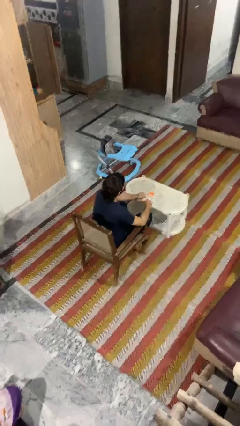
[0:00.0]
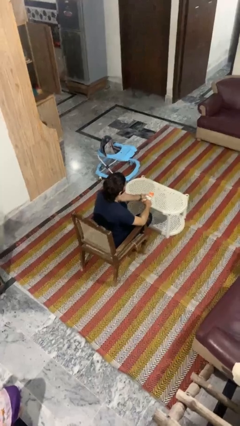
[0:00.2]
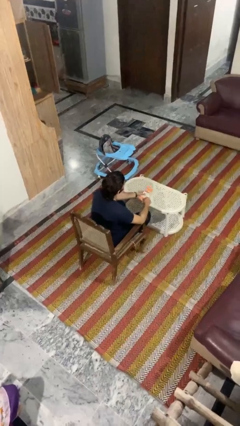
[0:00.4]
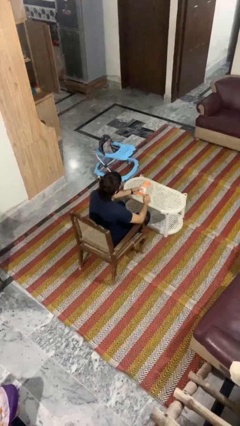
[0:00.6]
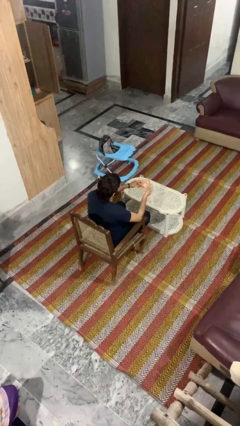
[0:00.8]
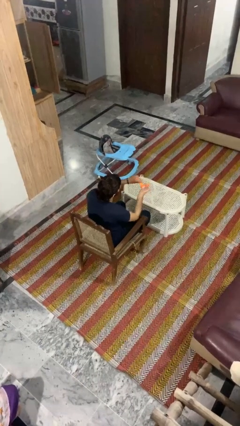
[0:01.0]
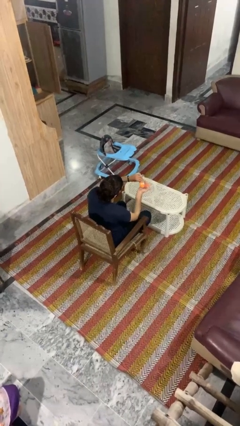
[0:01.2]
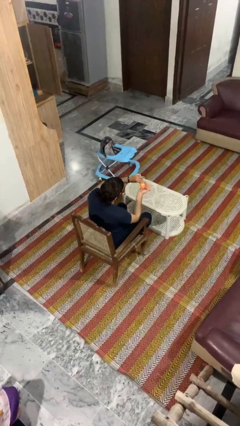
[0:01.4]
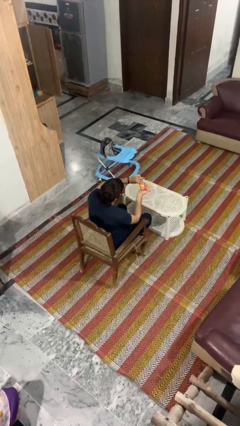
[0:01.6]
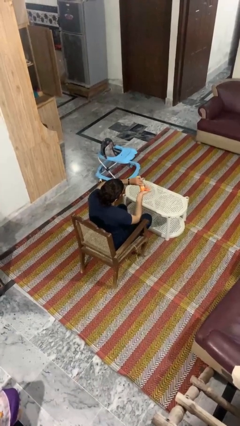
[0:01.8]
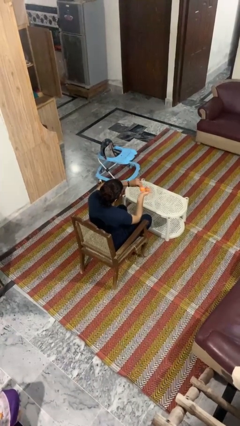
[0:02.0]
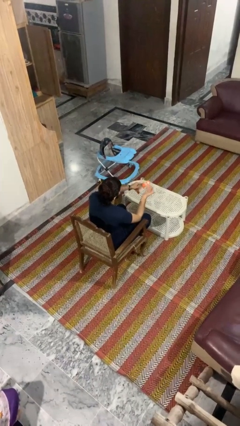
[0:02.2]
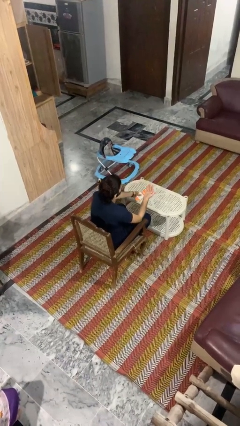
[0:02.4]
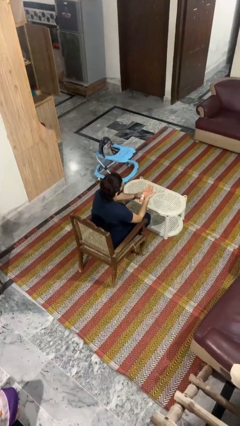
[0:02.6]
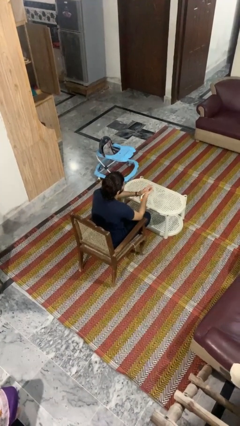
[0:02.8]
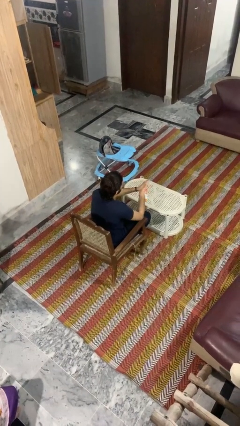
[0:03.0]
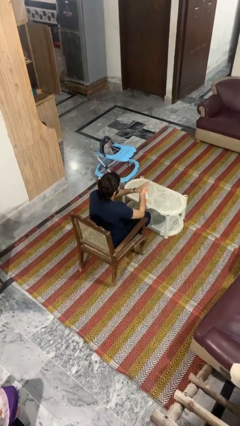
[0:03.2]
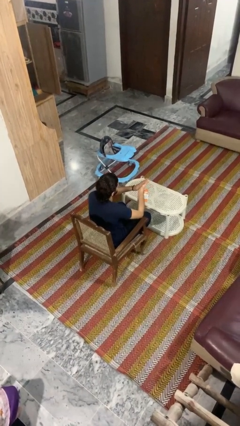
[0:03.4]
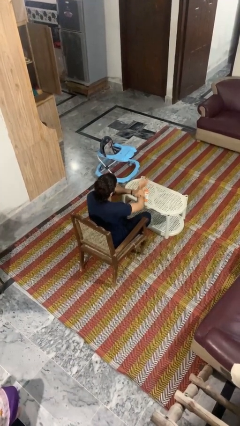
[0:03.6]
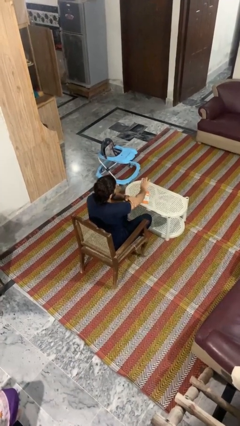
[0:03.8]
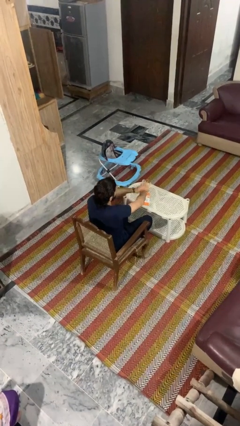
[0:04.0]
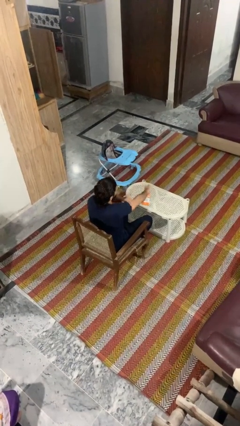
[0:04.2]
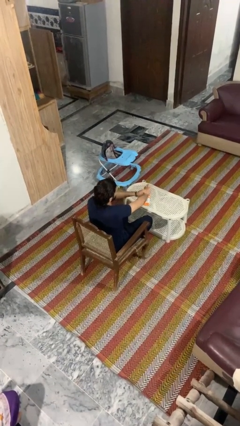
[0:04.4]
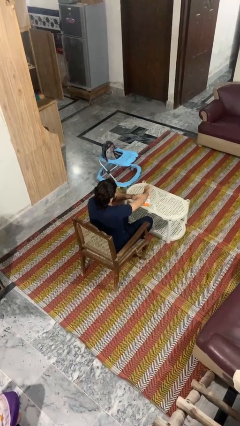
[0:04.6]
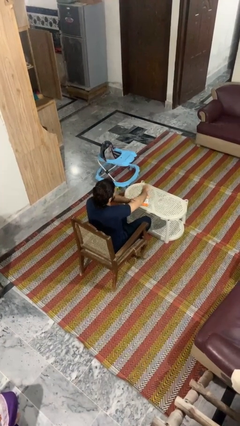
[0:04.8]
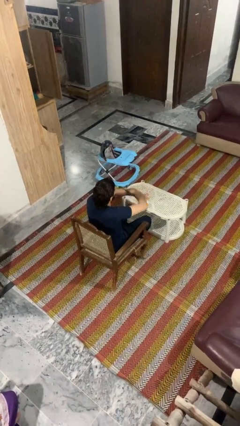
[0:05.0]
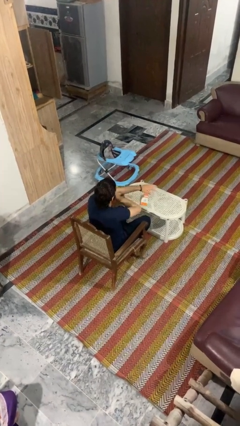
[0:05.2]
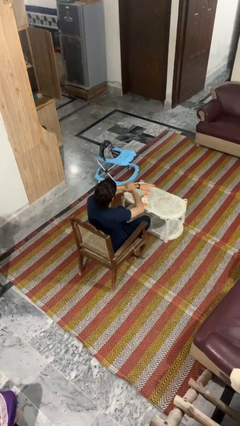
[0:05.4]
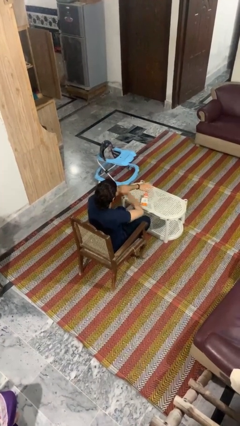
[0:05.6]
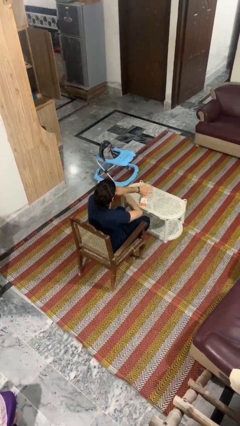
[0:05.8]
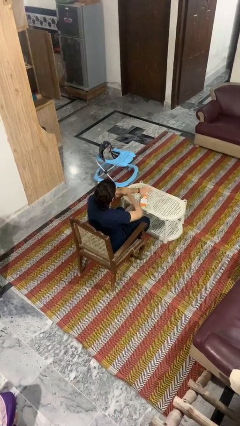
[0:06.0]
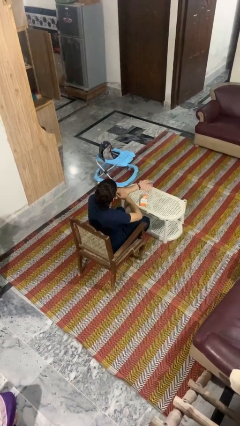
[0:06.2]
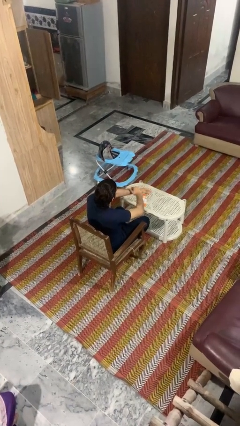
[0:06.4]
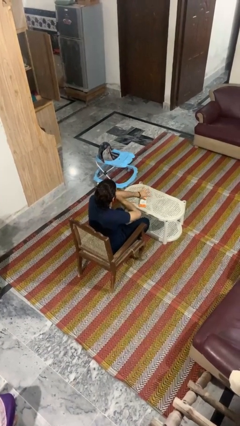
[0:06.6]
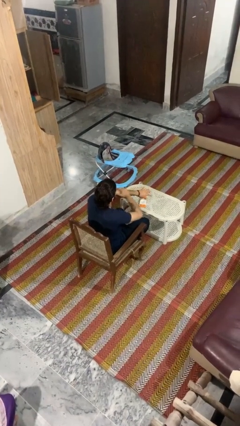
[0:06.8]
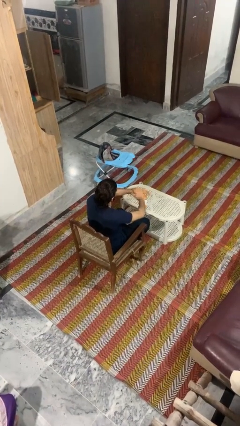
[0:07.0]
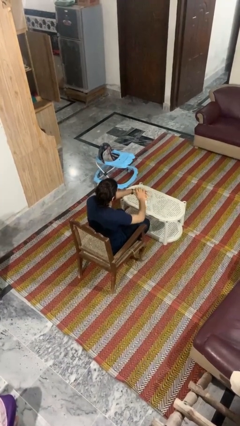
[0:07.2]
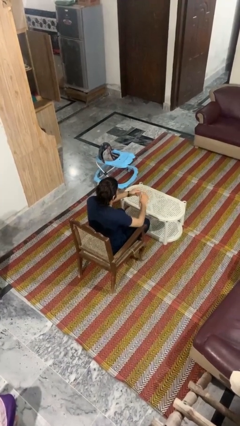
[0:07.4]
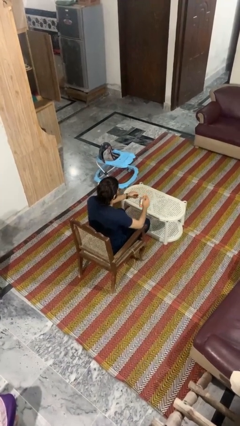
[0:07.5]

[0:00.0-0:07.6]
person applies sunscreen

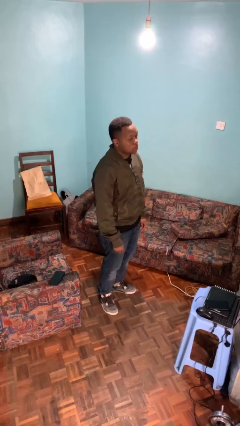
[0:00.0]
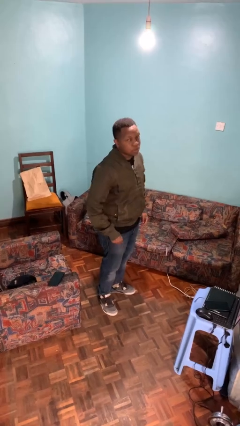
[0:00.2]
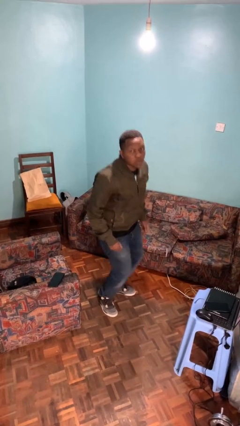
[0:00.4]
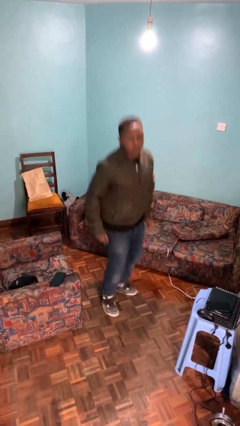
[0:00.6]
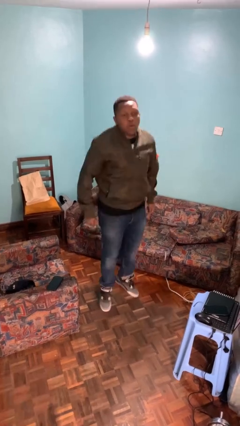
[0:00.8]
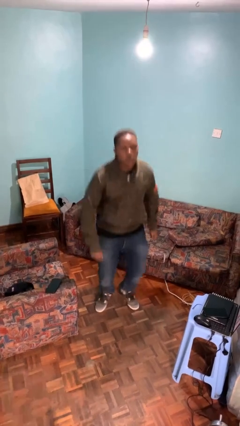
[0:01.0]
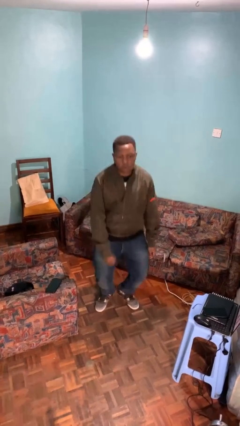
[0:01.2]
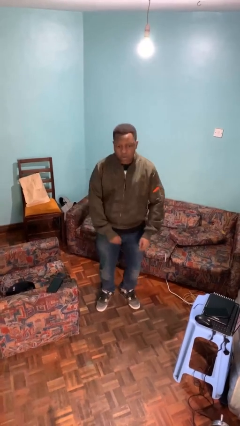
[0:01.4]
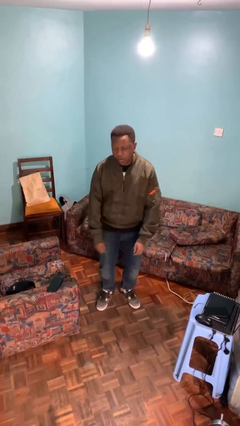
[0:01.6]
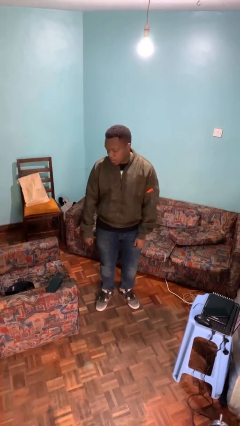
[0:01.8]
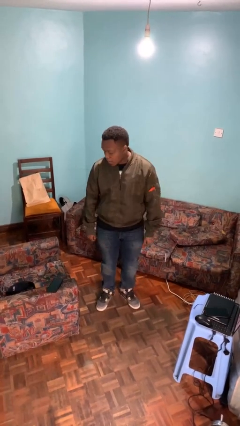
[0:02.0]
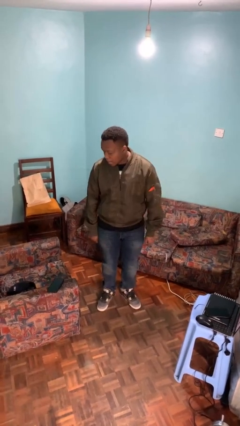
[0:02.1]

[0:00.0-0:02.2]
person jumps

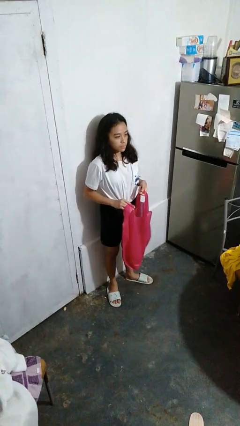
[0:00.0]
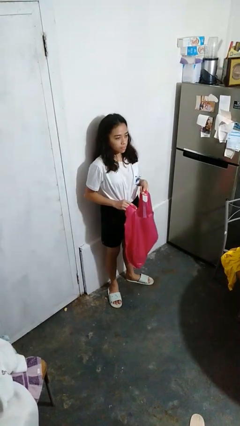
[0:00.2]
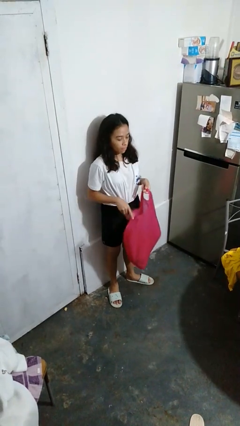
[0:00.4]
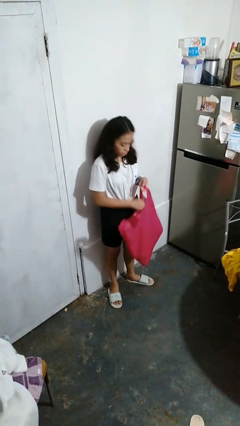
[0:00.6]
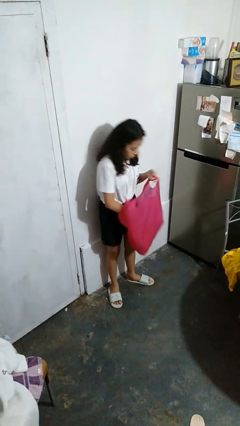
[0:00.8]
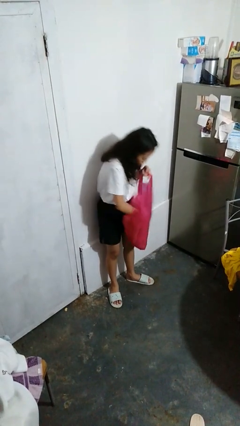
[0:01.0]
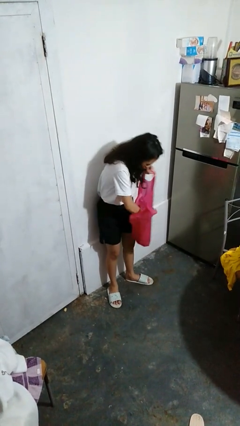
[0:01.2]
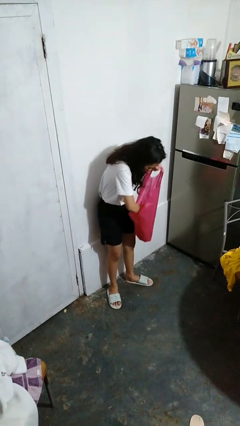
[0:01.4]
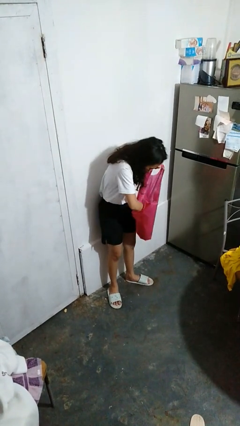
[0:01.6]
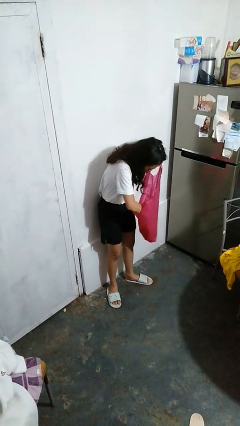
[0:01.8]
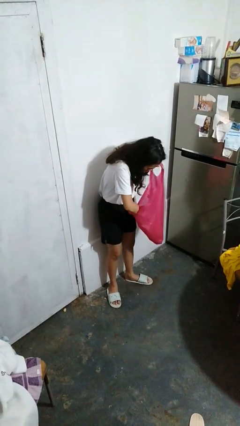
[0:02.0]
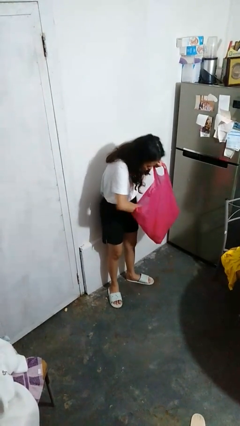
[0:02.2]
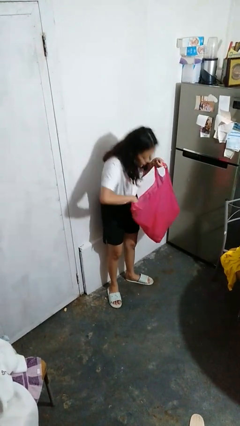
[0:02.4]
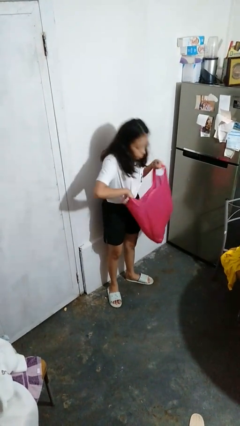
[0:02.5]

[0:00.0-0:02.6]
person searches in bag

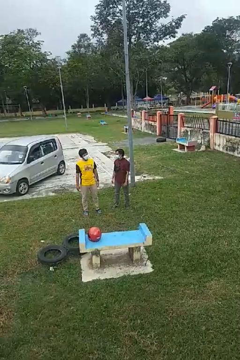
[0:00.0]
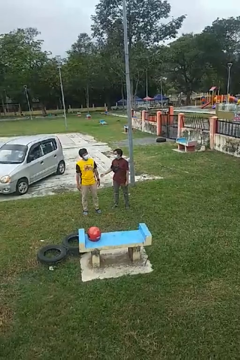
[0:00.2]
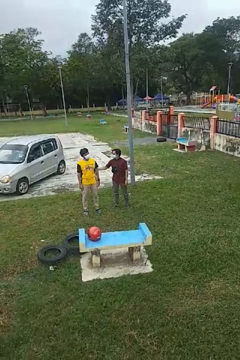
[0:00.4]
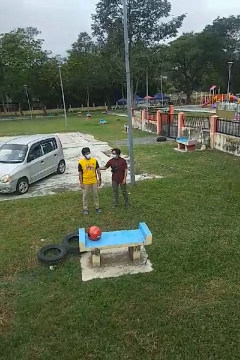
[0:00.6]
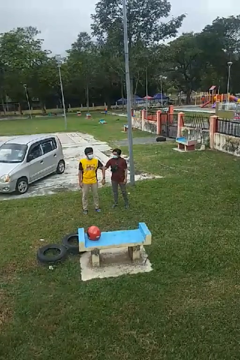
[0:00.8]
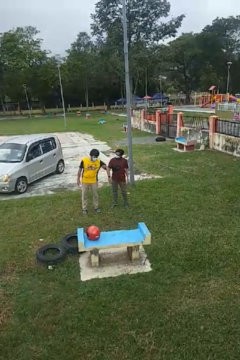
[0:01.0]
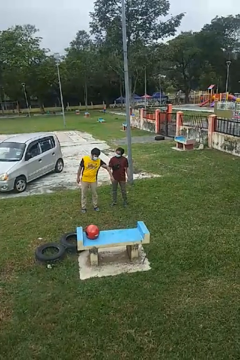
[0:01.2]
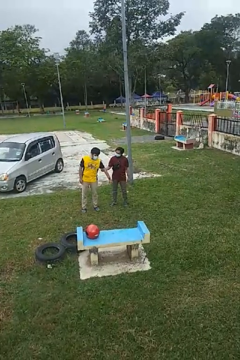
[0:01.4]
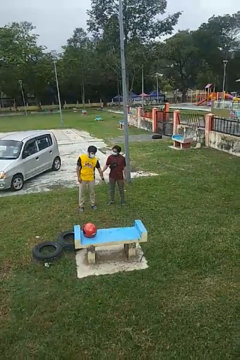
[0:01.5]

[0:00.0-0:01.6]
person grabs person by bicep

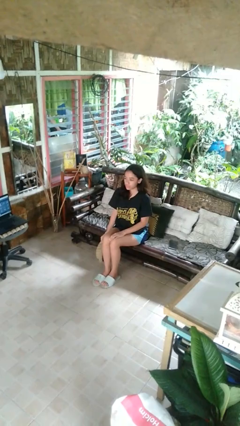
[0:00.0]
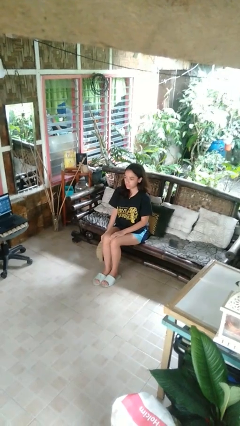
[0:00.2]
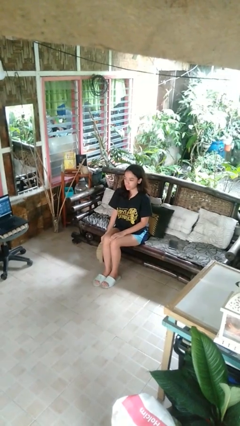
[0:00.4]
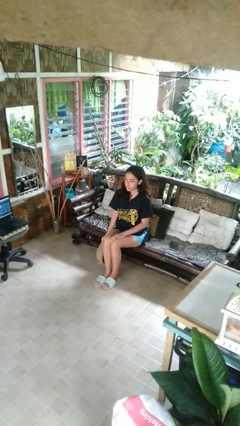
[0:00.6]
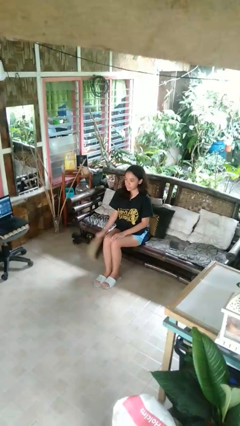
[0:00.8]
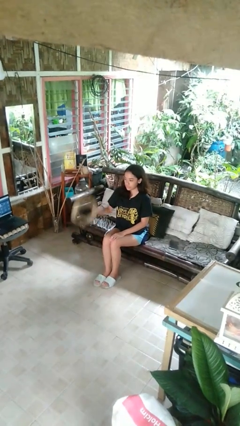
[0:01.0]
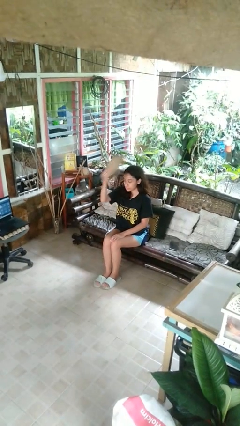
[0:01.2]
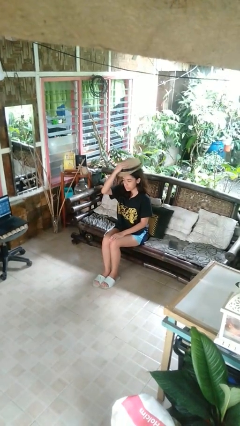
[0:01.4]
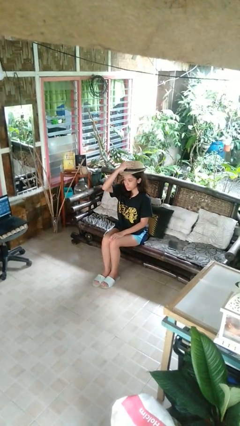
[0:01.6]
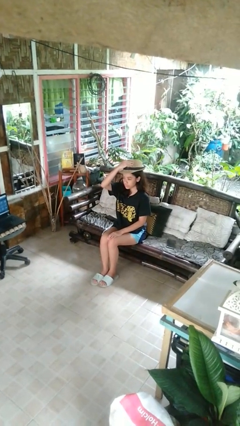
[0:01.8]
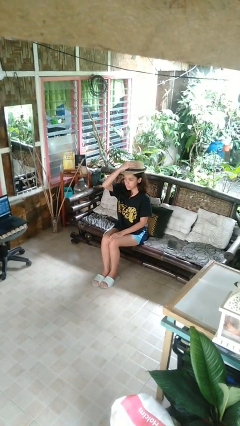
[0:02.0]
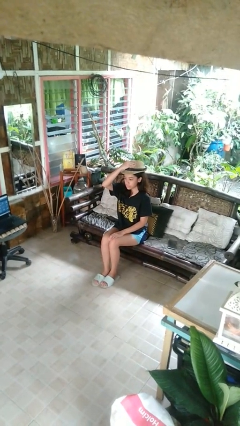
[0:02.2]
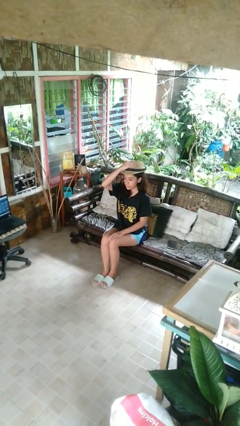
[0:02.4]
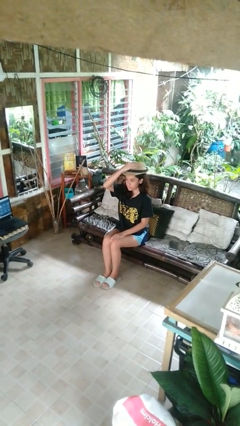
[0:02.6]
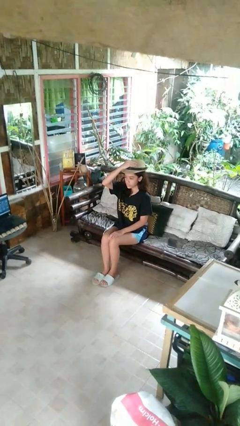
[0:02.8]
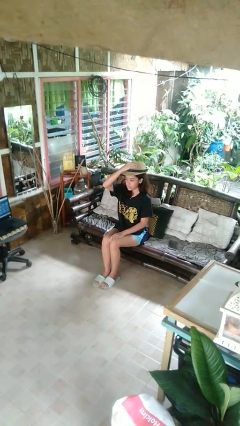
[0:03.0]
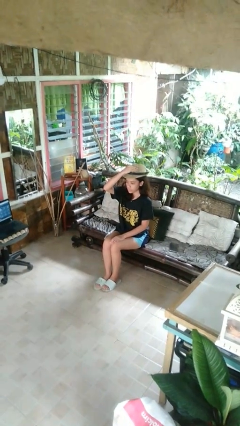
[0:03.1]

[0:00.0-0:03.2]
person puts on hat

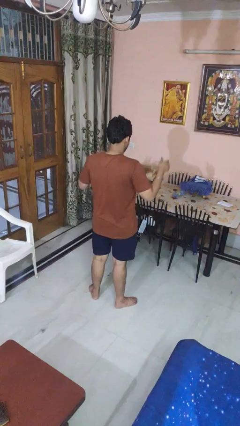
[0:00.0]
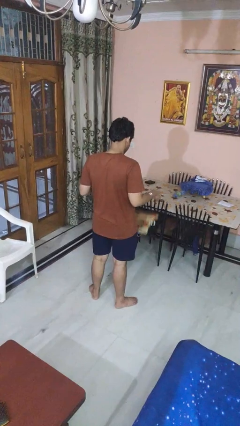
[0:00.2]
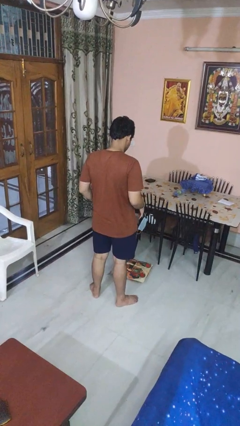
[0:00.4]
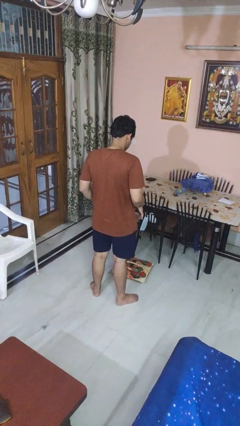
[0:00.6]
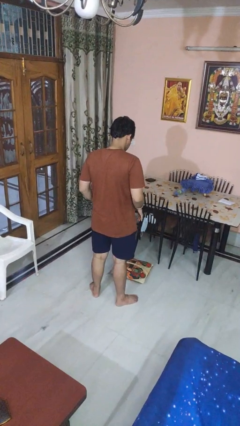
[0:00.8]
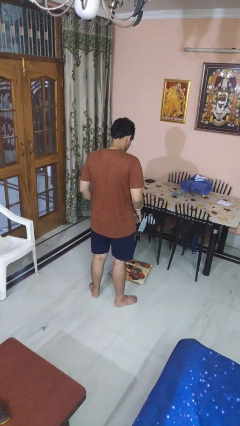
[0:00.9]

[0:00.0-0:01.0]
person throws object into air
